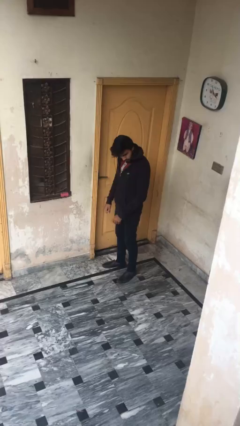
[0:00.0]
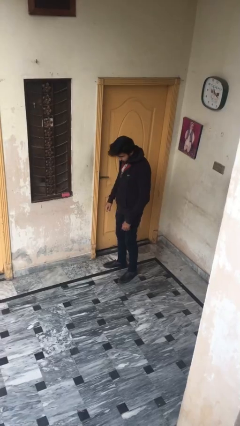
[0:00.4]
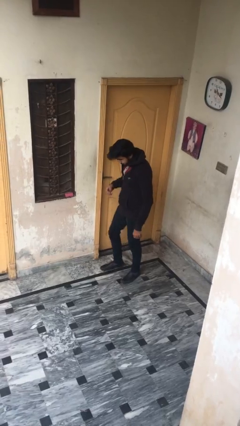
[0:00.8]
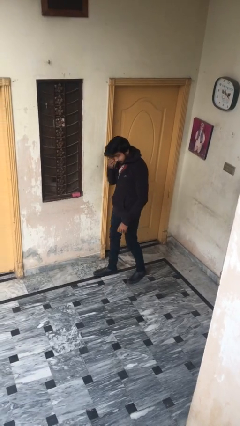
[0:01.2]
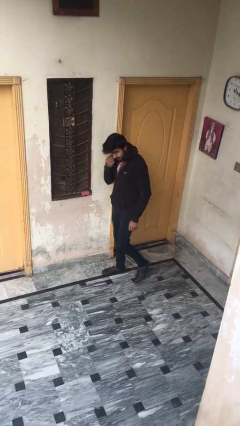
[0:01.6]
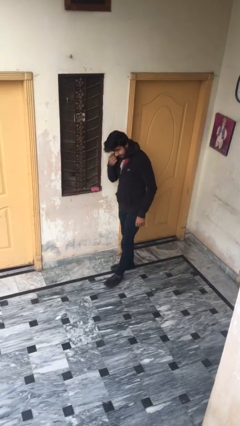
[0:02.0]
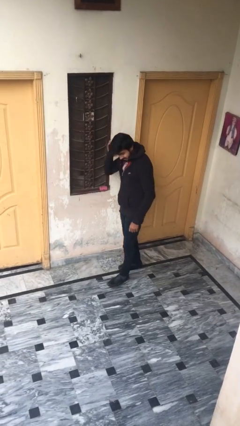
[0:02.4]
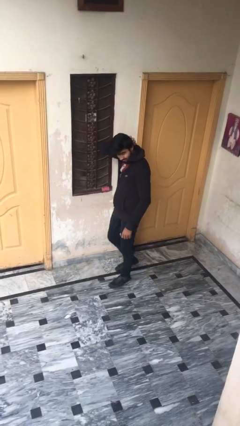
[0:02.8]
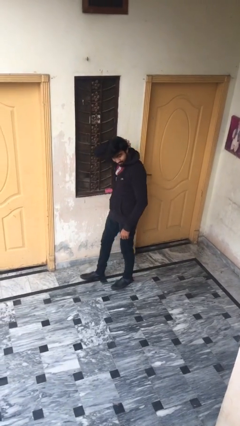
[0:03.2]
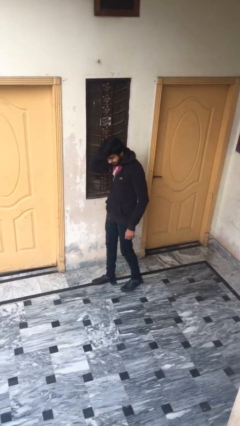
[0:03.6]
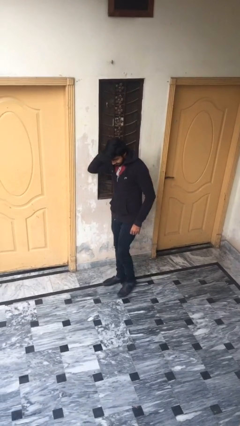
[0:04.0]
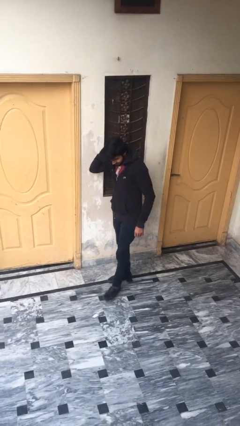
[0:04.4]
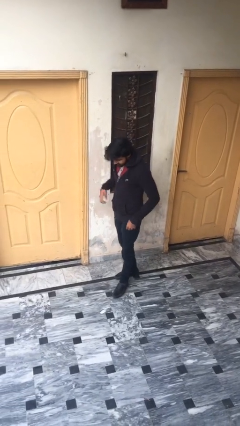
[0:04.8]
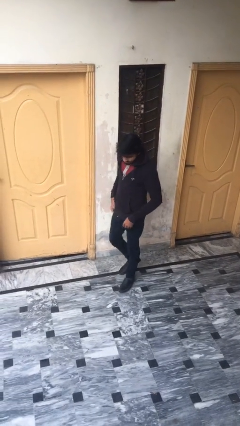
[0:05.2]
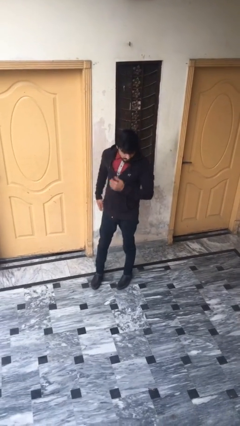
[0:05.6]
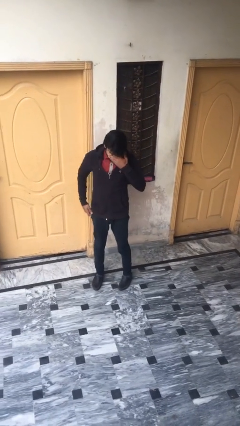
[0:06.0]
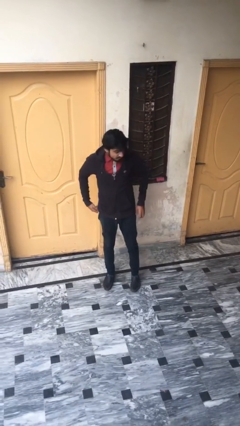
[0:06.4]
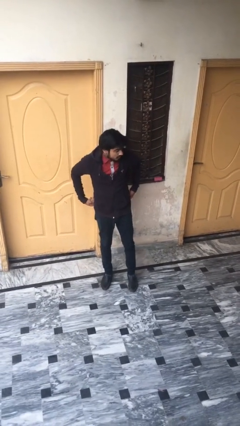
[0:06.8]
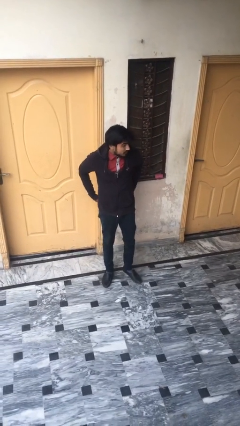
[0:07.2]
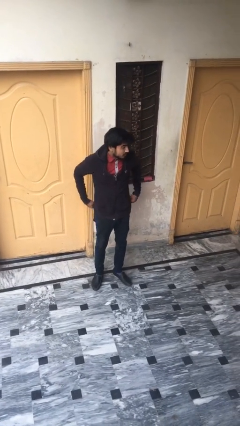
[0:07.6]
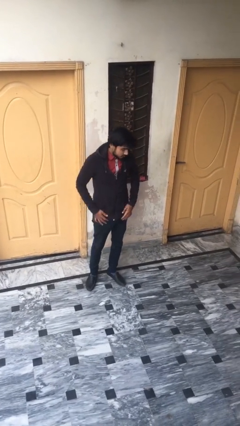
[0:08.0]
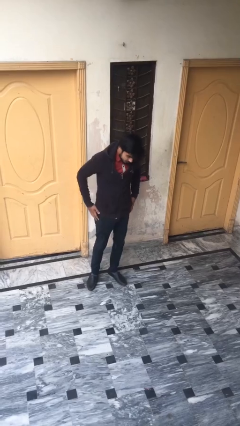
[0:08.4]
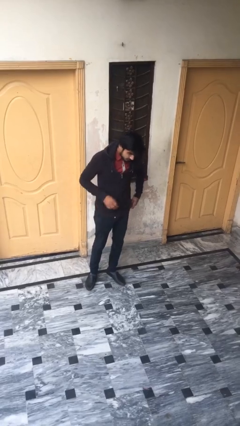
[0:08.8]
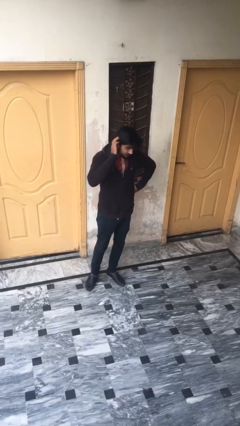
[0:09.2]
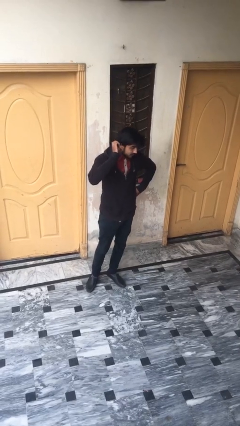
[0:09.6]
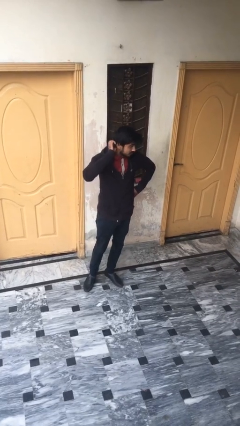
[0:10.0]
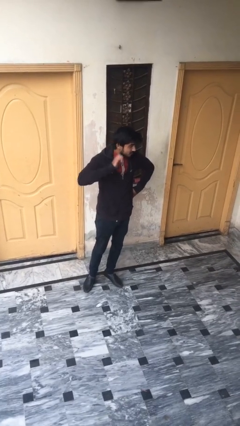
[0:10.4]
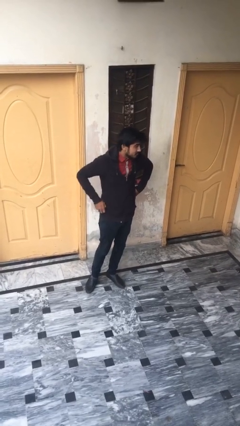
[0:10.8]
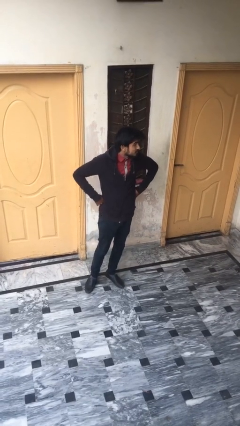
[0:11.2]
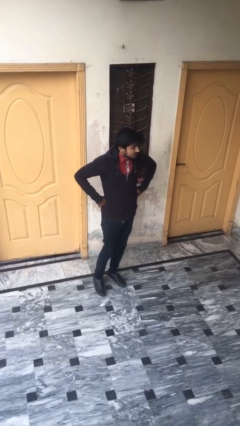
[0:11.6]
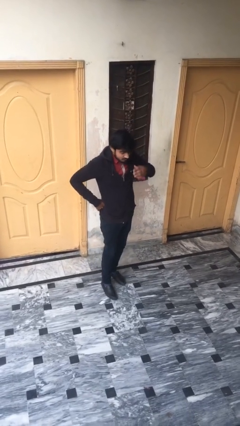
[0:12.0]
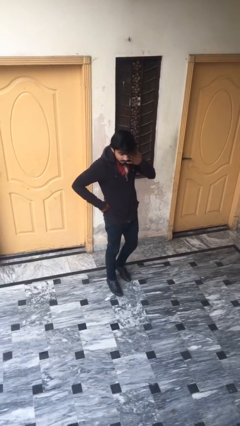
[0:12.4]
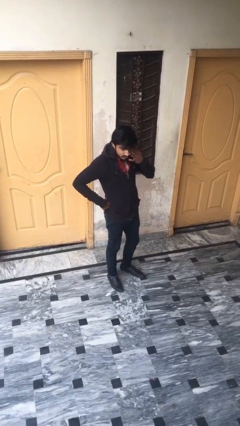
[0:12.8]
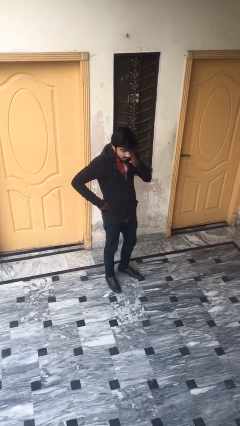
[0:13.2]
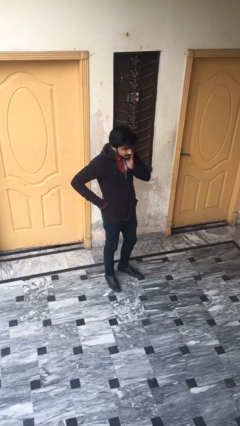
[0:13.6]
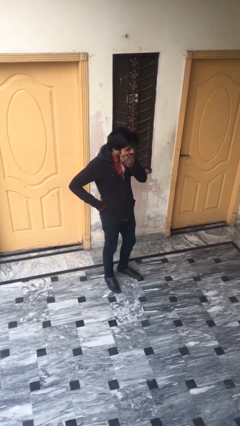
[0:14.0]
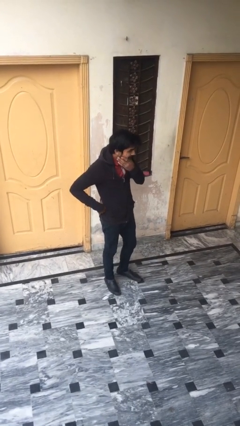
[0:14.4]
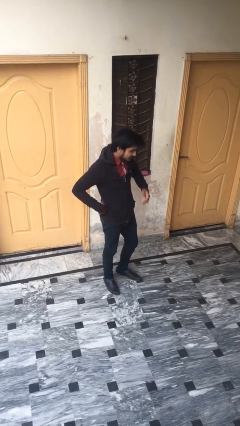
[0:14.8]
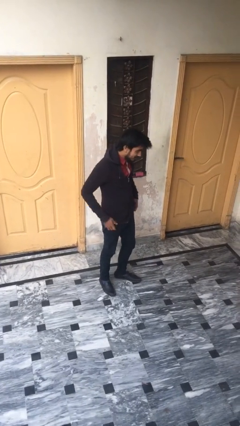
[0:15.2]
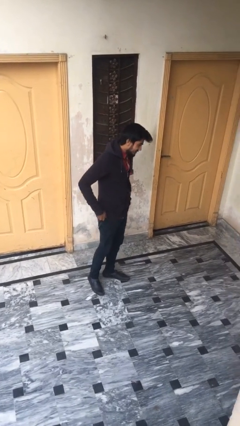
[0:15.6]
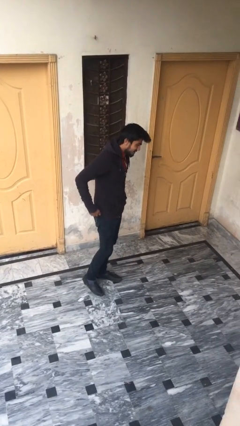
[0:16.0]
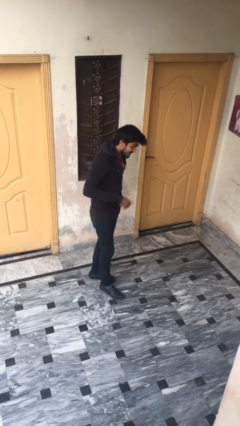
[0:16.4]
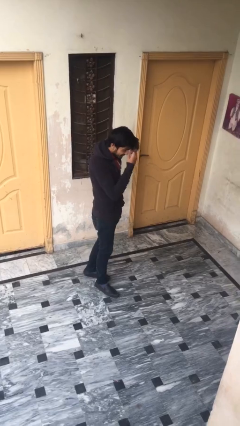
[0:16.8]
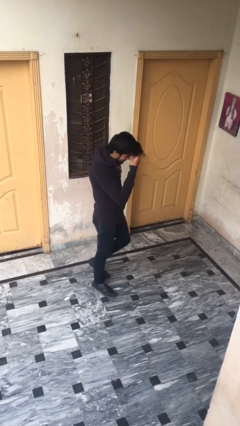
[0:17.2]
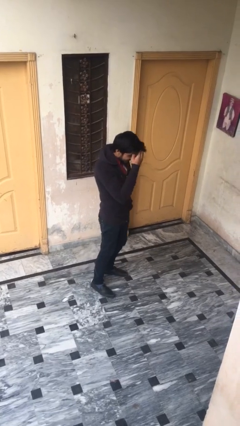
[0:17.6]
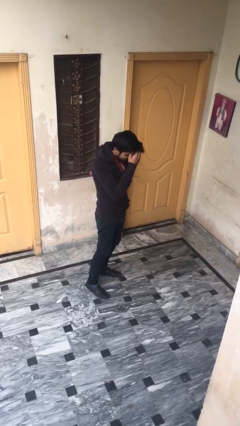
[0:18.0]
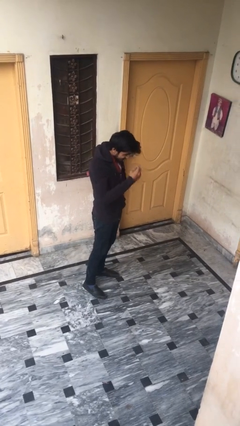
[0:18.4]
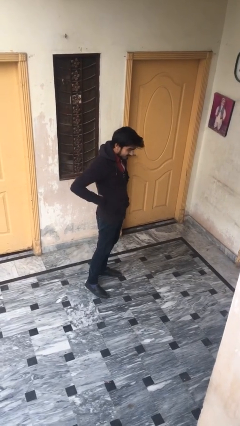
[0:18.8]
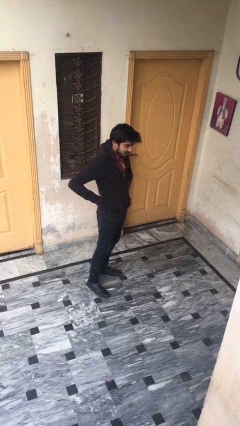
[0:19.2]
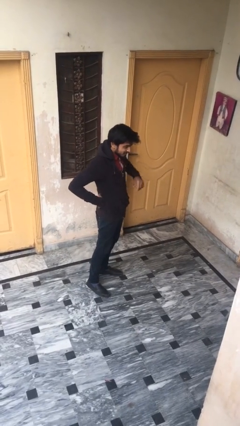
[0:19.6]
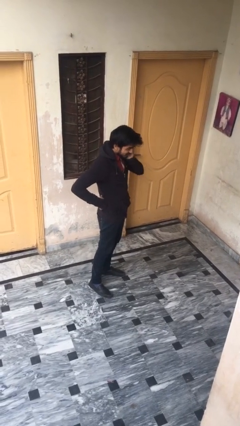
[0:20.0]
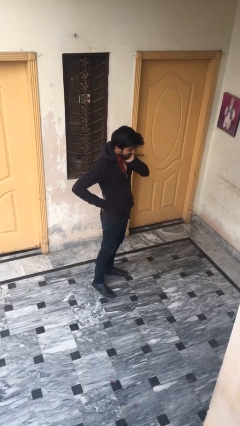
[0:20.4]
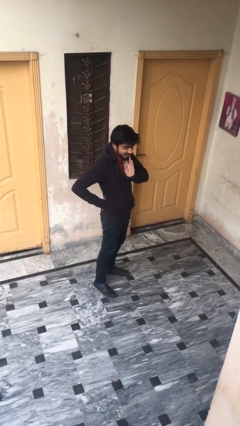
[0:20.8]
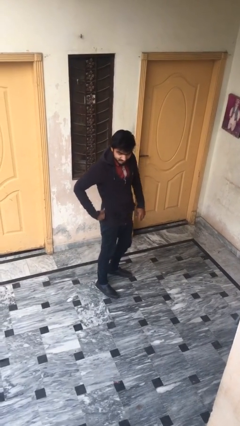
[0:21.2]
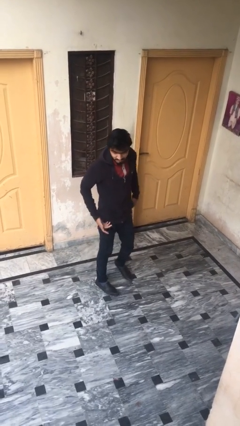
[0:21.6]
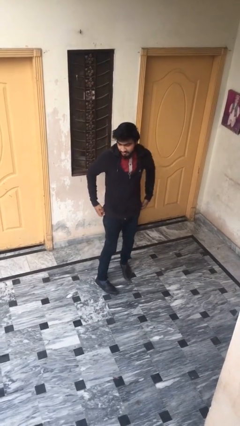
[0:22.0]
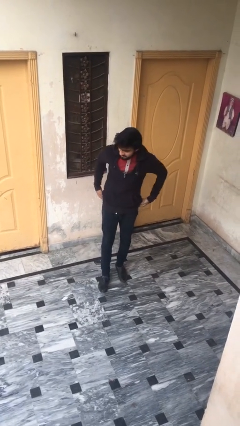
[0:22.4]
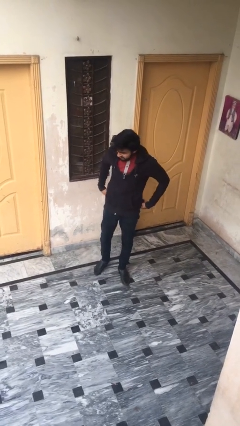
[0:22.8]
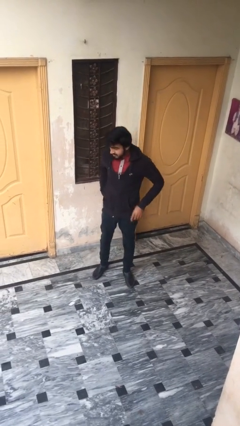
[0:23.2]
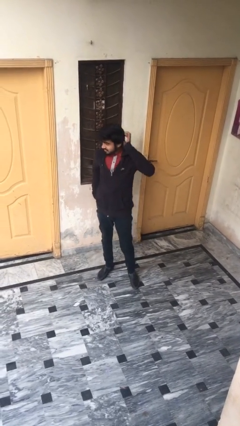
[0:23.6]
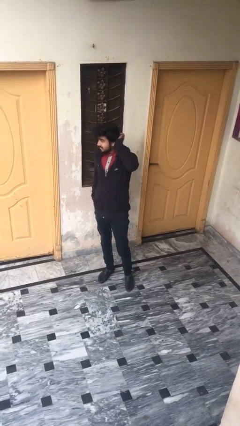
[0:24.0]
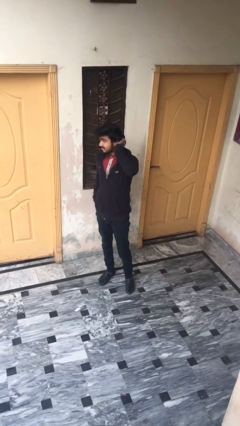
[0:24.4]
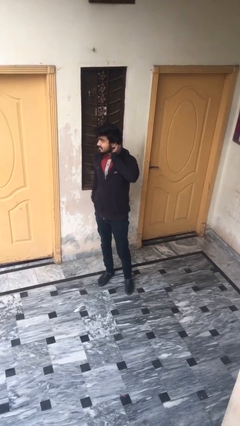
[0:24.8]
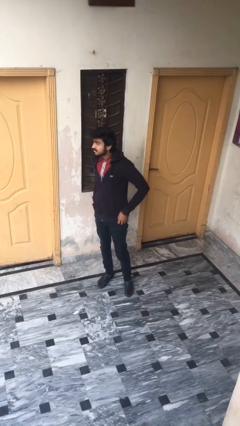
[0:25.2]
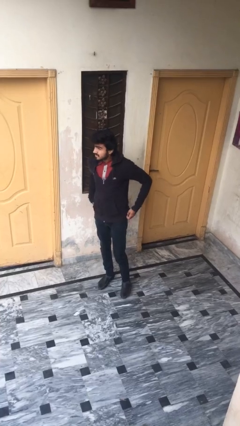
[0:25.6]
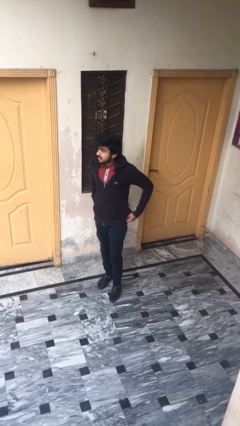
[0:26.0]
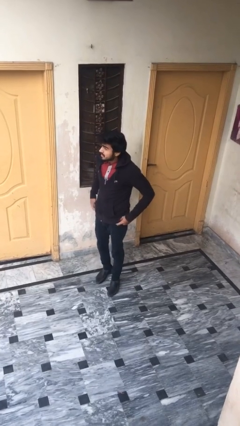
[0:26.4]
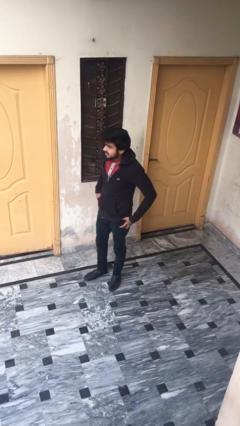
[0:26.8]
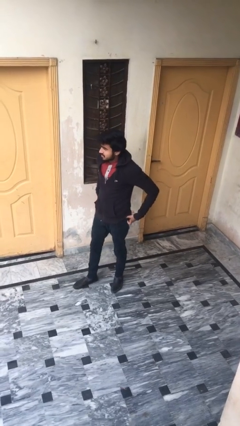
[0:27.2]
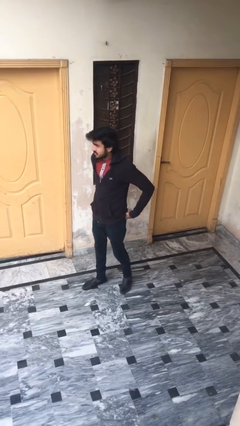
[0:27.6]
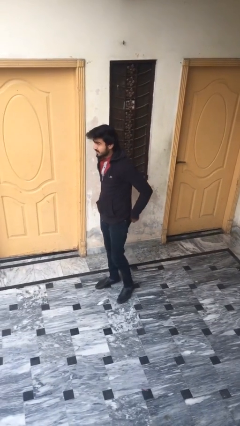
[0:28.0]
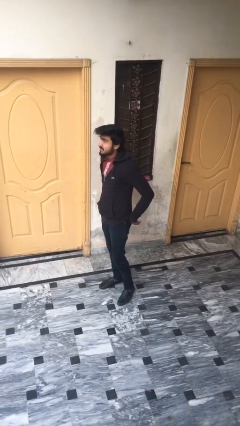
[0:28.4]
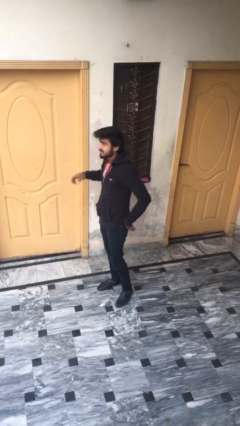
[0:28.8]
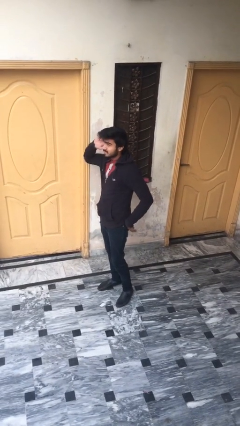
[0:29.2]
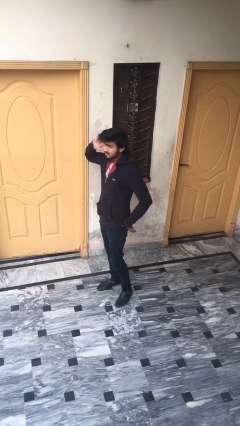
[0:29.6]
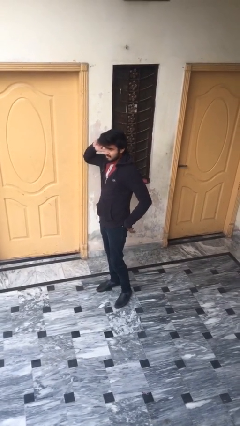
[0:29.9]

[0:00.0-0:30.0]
person walks

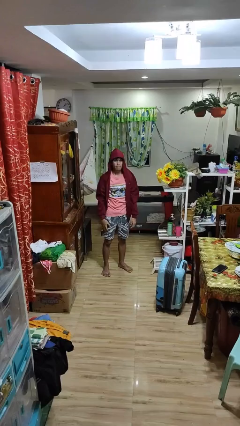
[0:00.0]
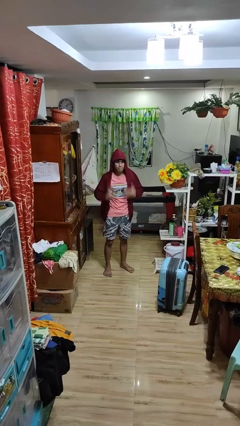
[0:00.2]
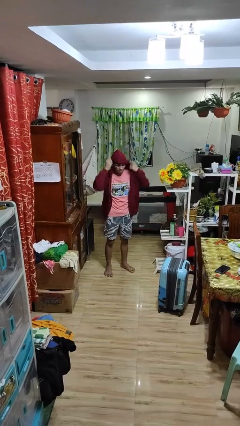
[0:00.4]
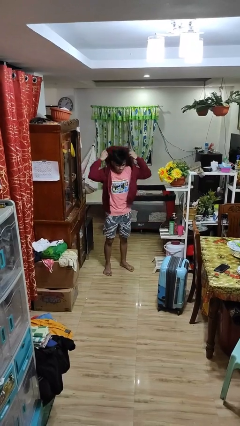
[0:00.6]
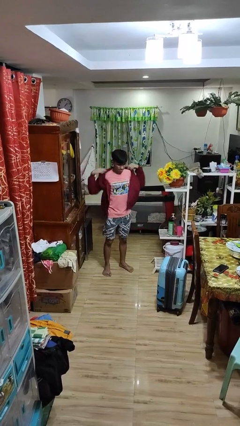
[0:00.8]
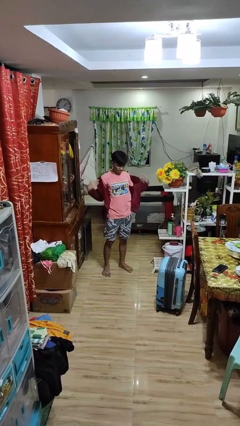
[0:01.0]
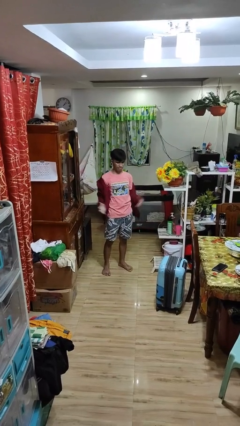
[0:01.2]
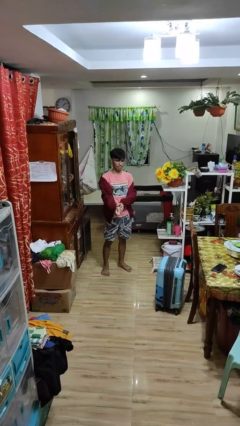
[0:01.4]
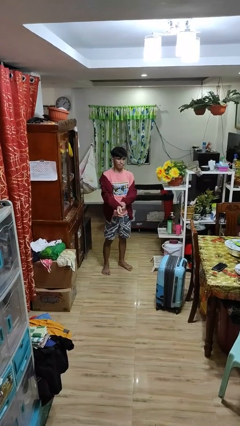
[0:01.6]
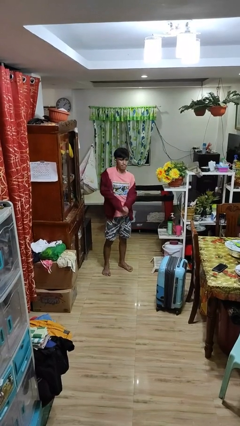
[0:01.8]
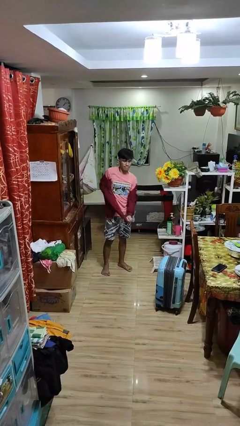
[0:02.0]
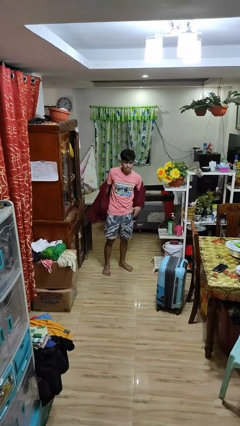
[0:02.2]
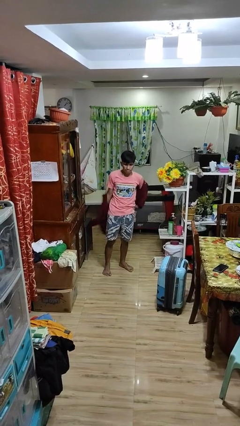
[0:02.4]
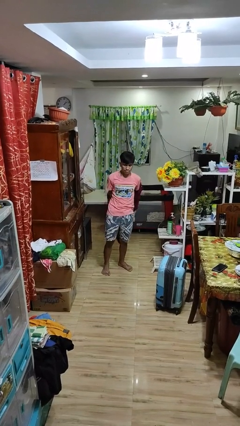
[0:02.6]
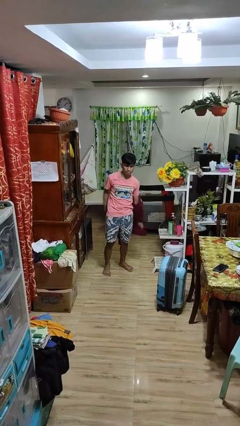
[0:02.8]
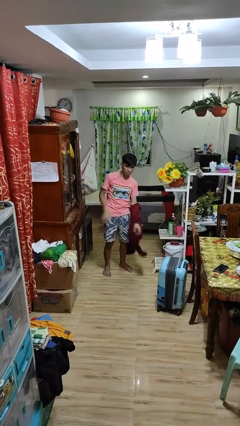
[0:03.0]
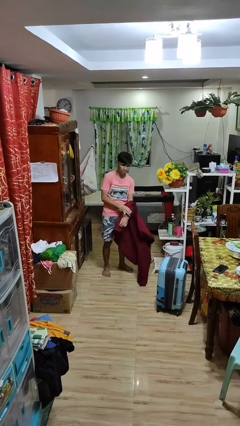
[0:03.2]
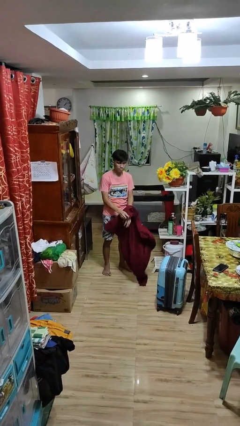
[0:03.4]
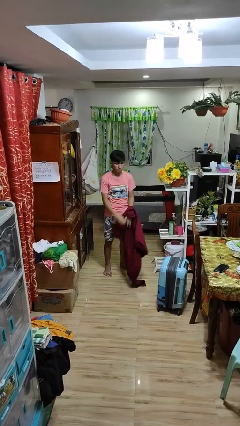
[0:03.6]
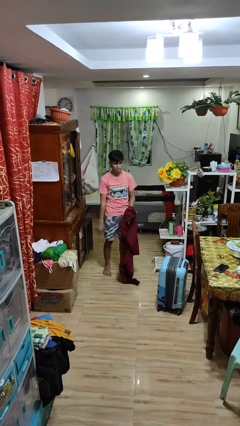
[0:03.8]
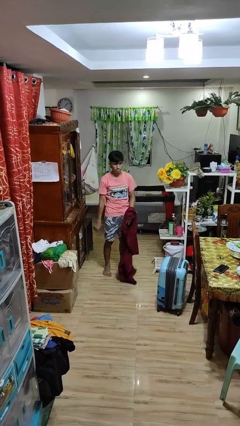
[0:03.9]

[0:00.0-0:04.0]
person takes off hoodie
